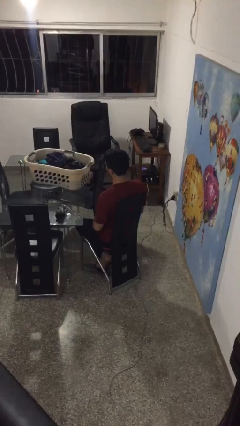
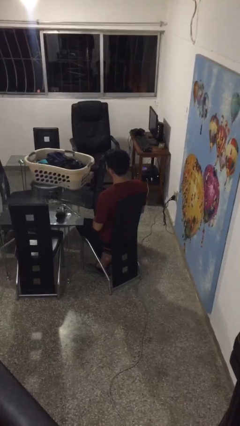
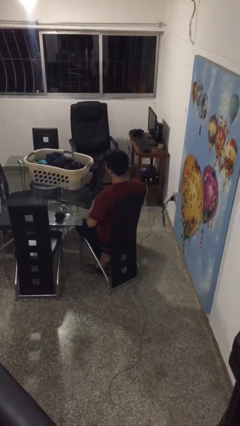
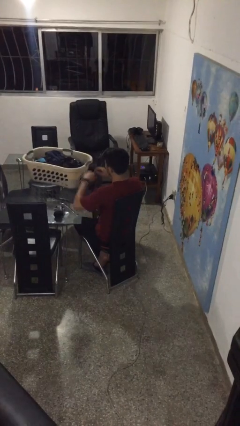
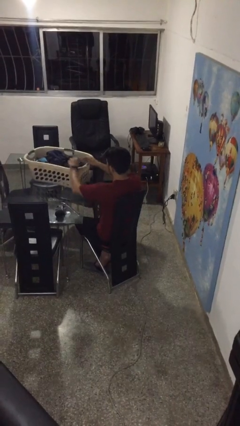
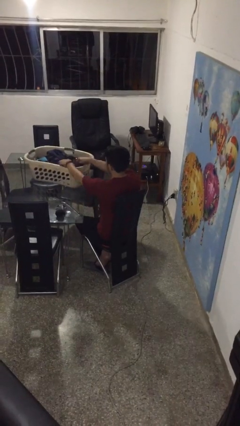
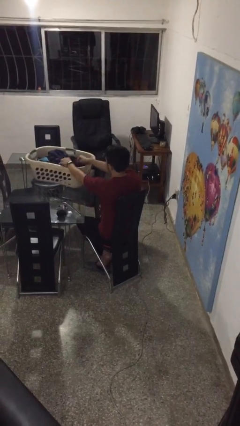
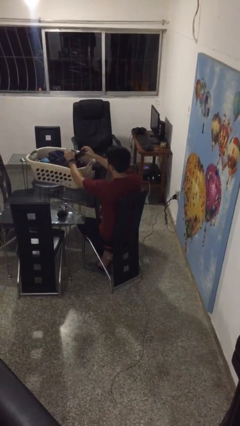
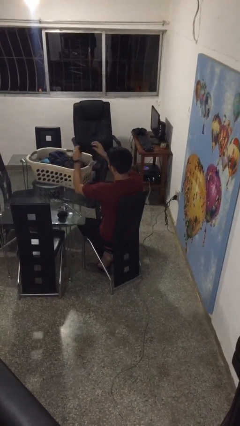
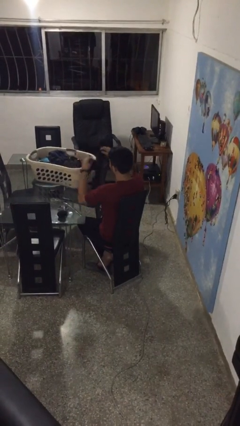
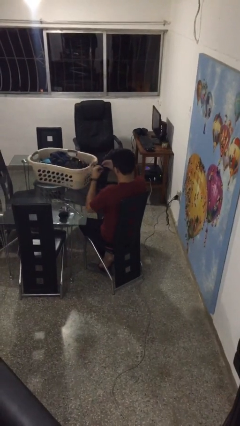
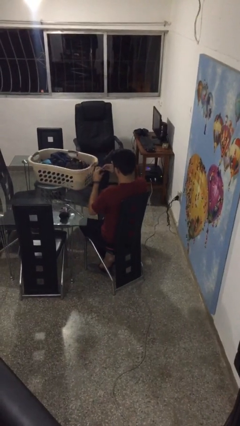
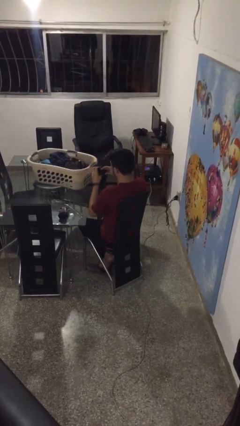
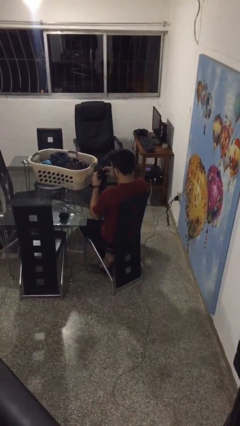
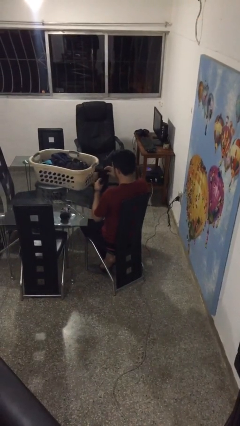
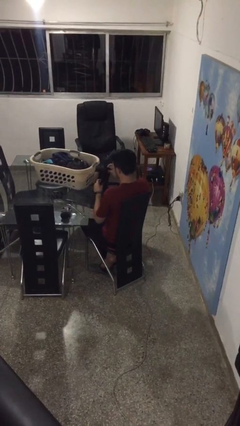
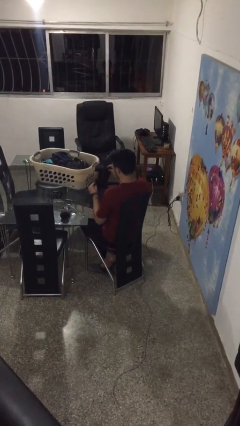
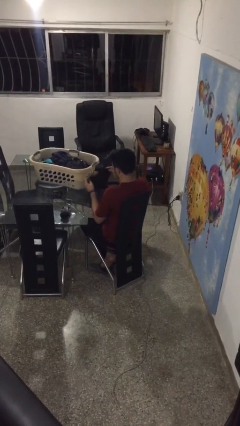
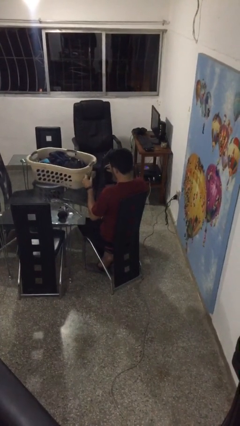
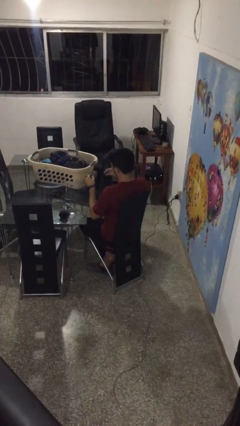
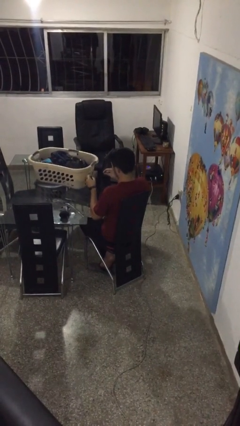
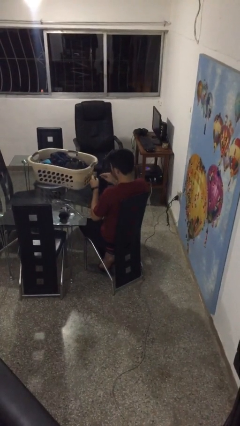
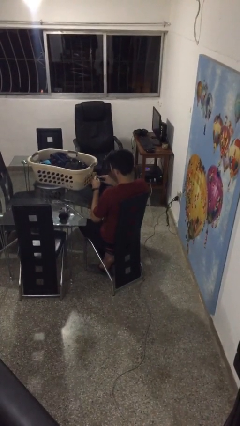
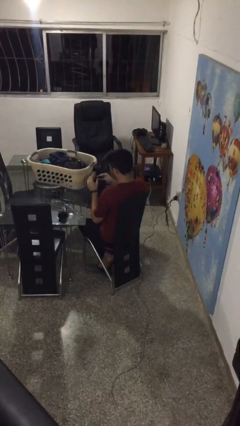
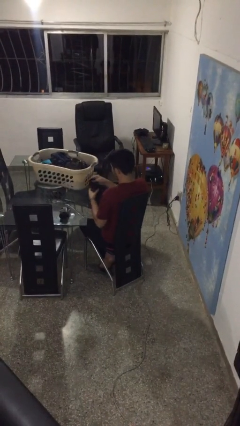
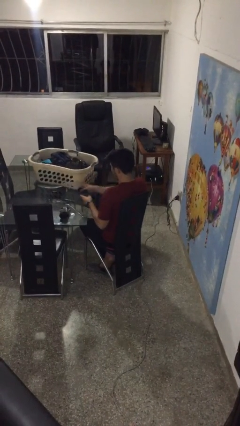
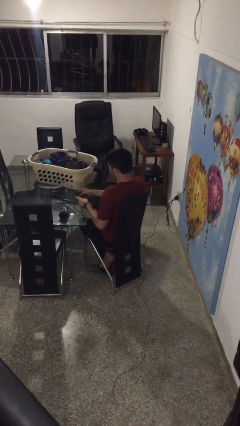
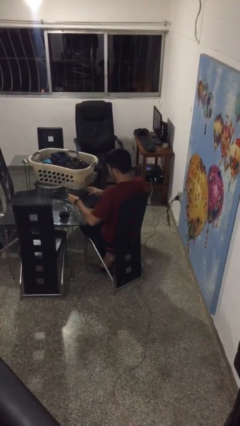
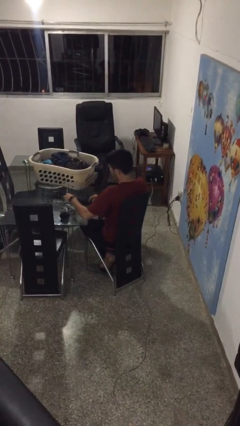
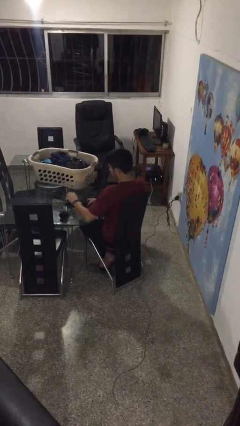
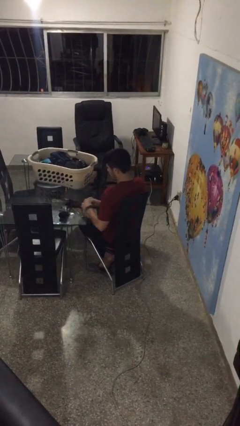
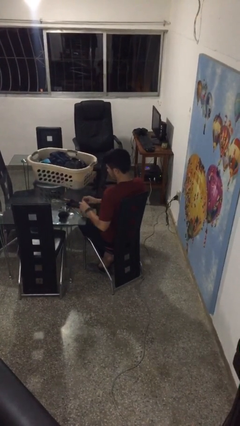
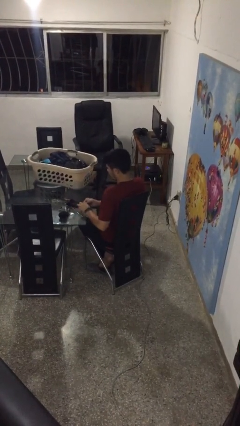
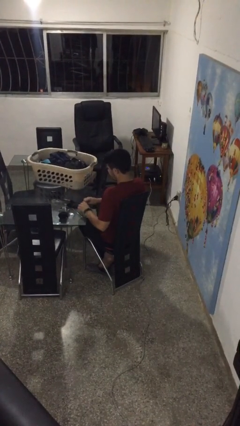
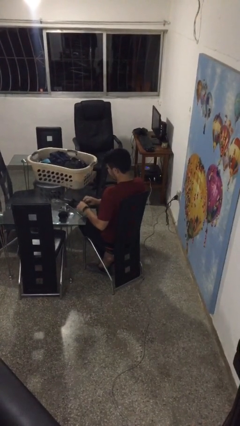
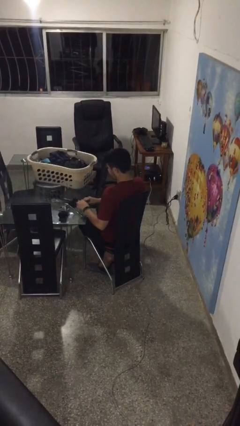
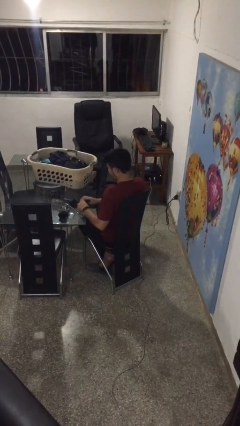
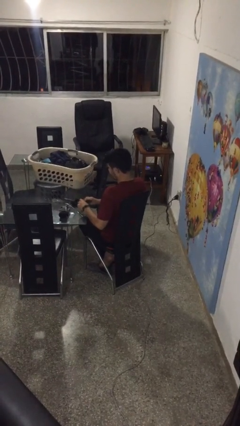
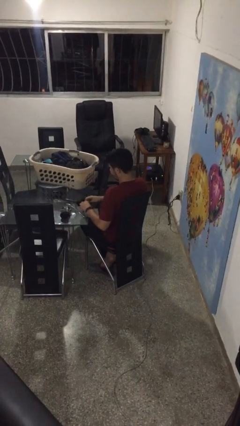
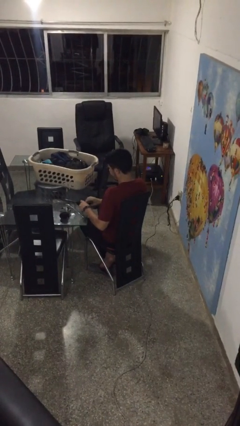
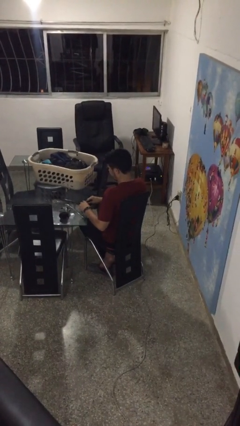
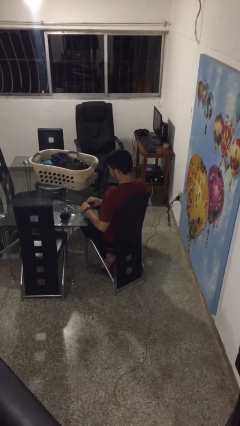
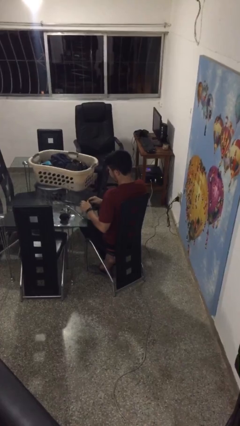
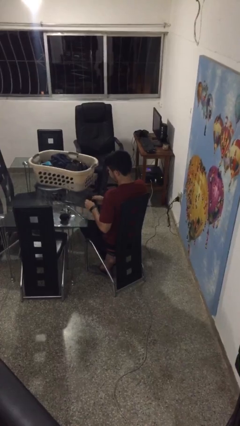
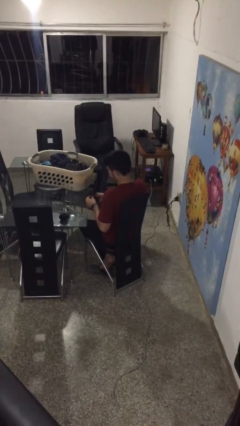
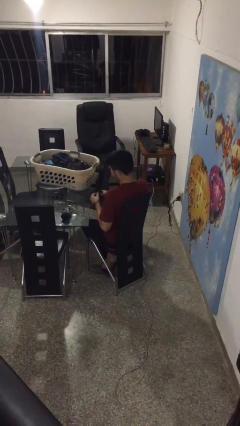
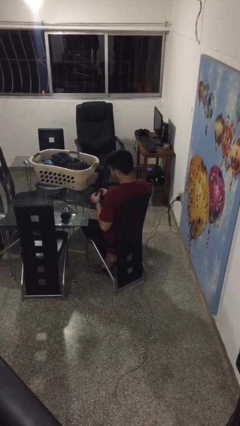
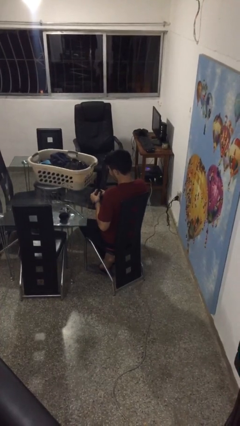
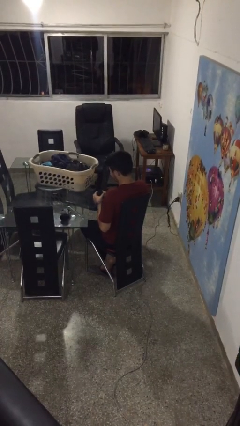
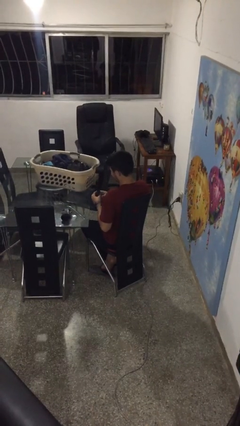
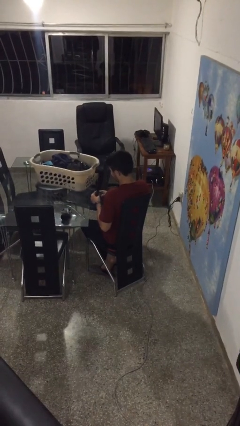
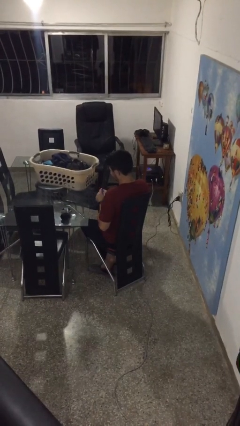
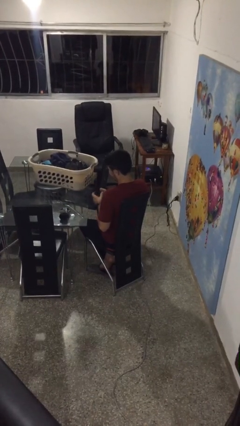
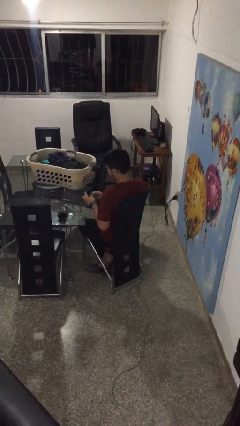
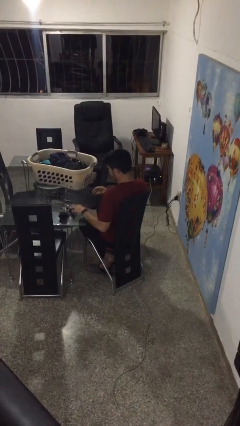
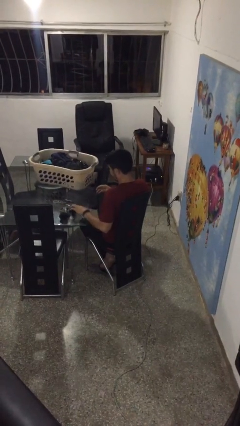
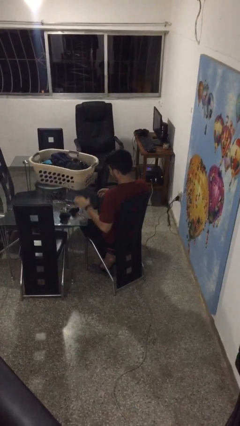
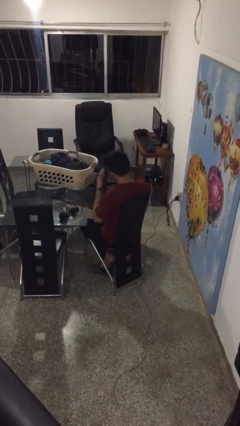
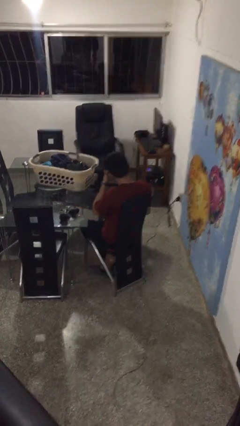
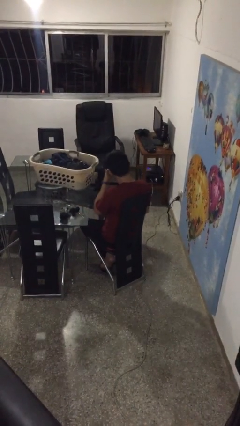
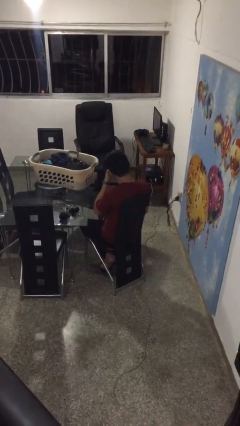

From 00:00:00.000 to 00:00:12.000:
person folds socks

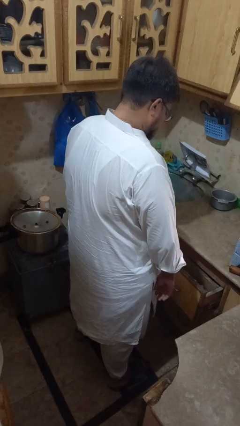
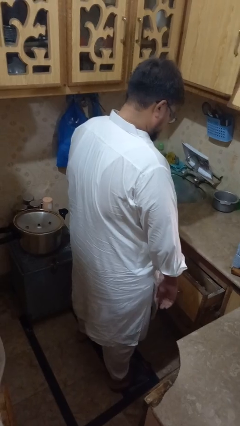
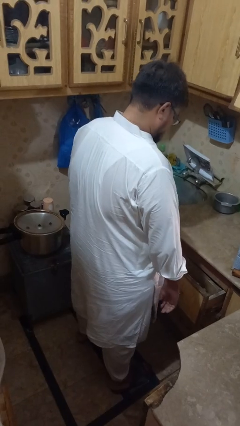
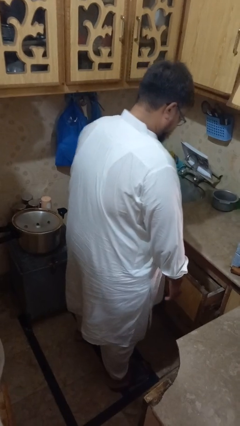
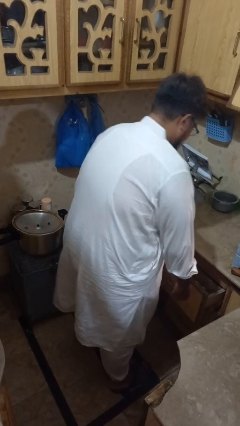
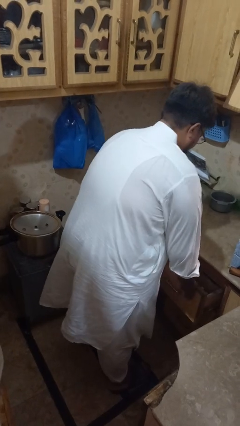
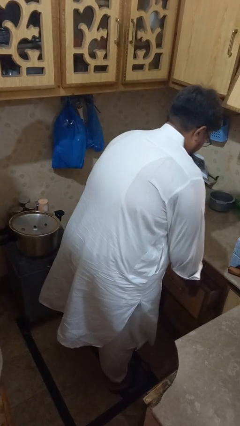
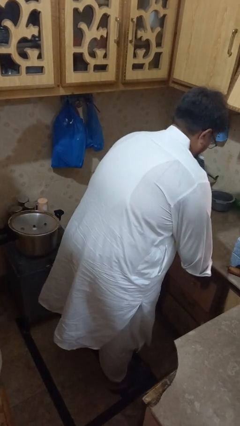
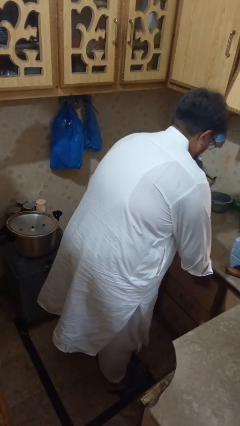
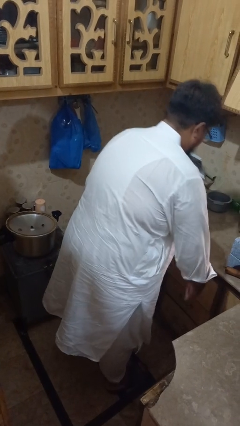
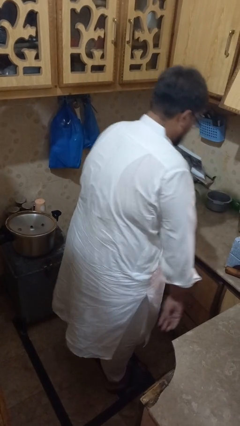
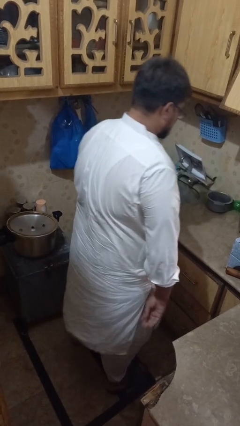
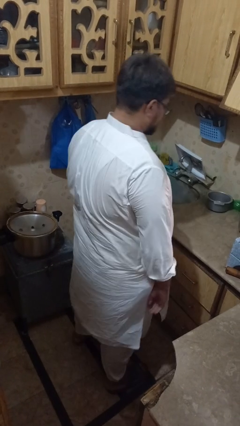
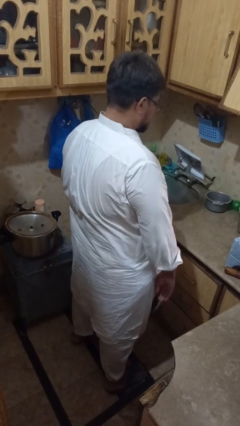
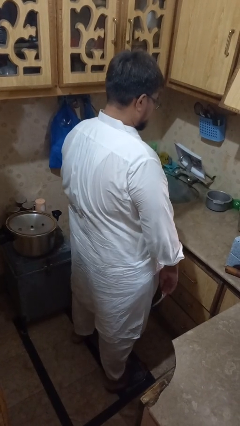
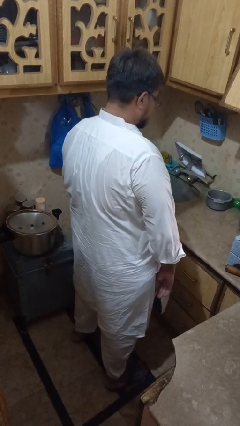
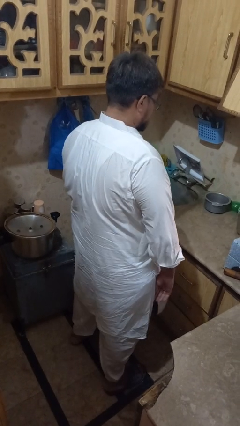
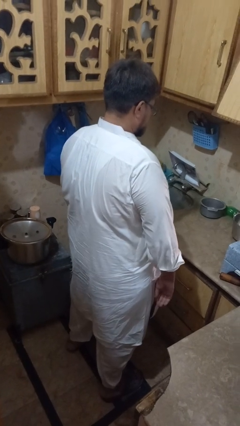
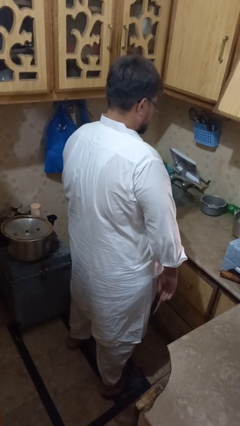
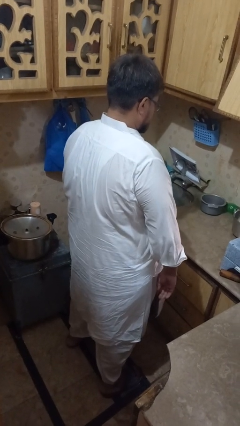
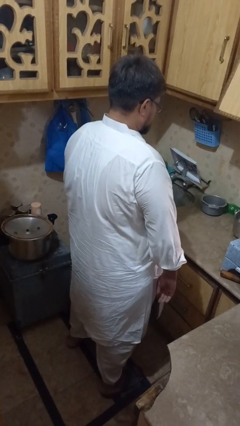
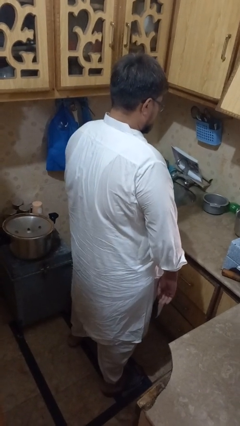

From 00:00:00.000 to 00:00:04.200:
person closes kitchen drawer

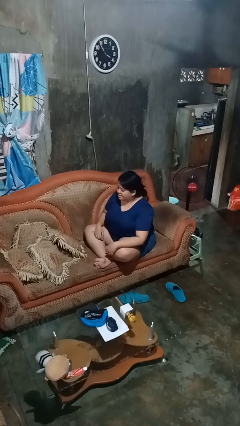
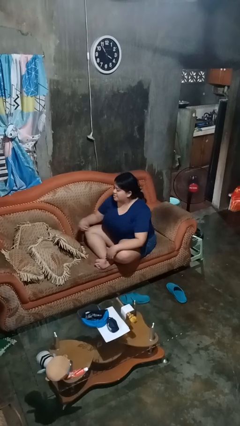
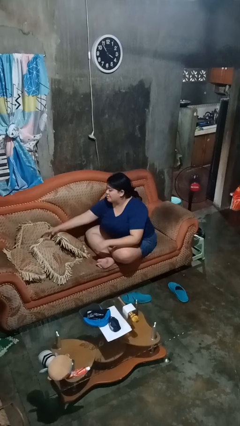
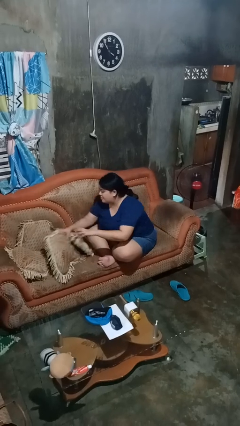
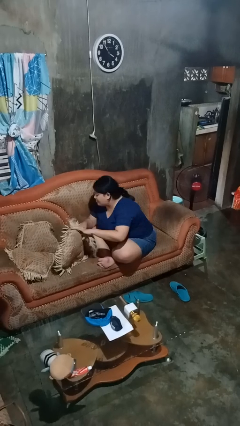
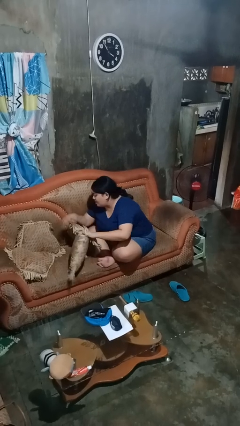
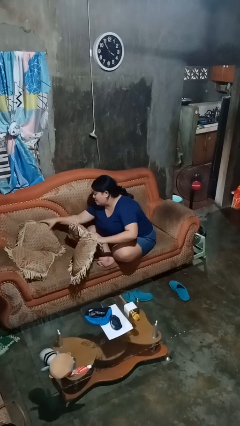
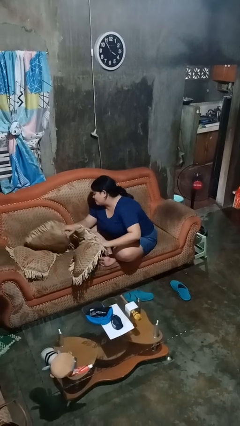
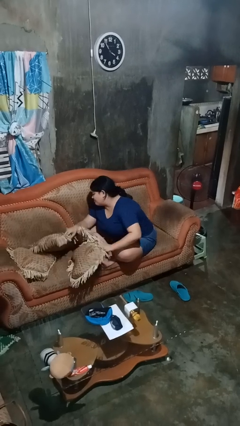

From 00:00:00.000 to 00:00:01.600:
person searches in couch
